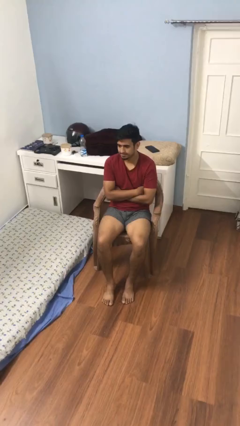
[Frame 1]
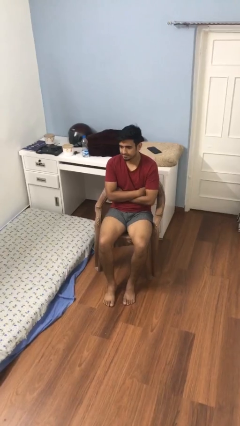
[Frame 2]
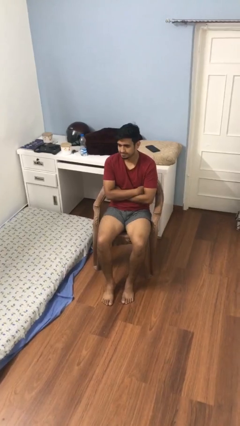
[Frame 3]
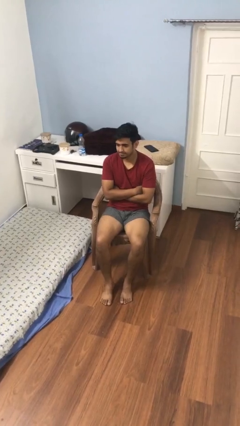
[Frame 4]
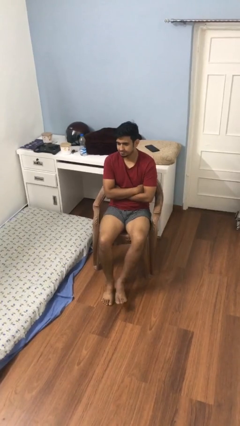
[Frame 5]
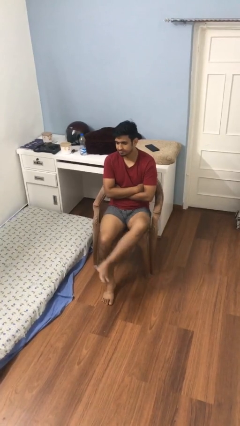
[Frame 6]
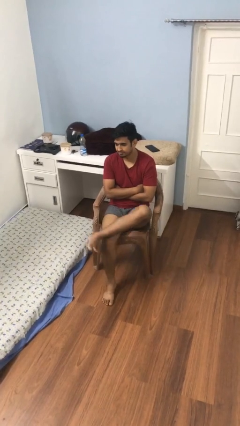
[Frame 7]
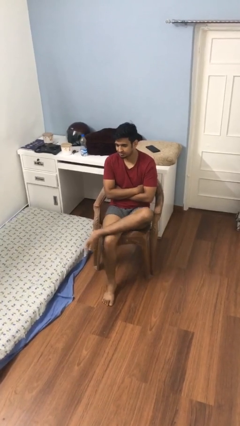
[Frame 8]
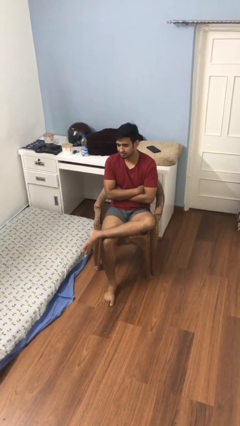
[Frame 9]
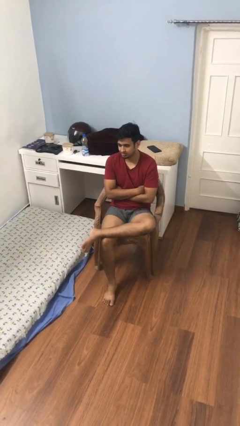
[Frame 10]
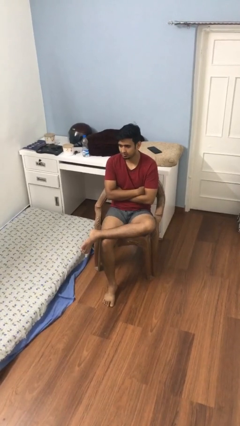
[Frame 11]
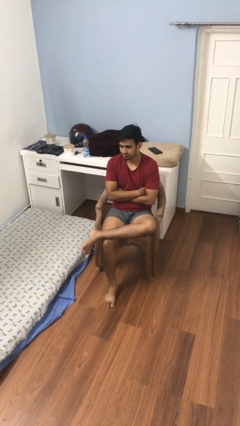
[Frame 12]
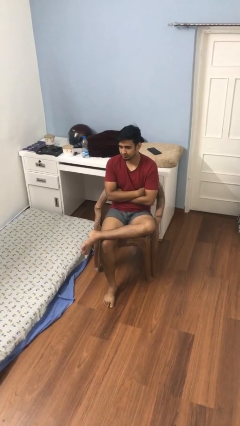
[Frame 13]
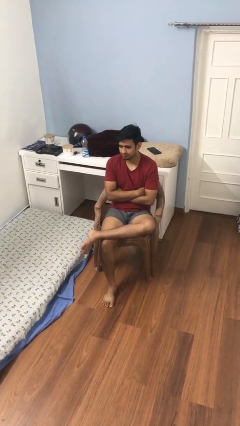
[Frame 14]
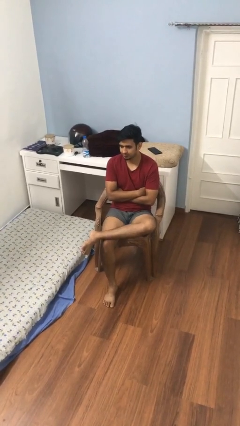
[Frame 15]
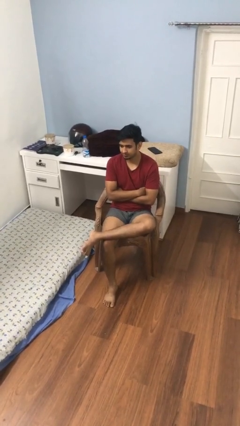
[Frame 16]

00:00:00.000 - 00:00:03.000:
person crosses legs

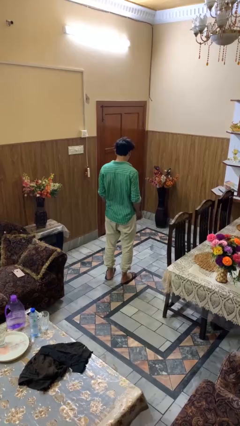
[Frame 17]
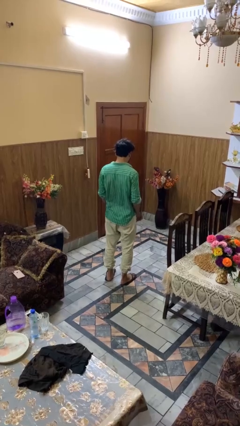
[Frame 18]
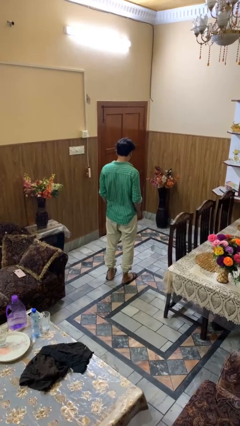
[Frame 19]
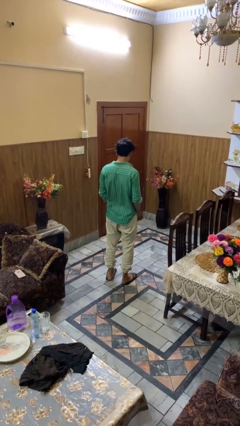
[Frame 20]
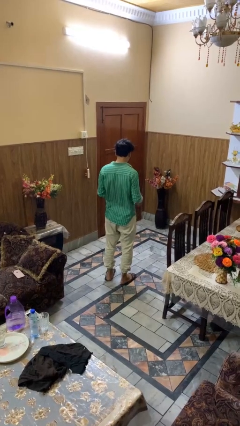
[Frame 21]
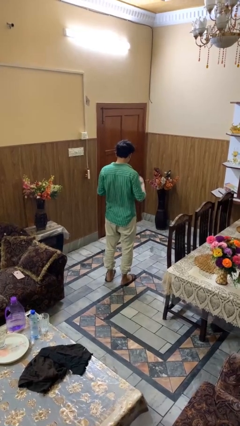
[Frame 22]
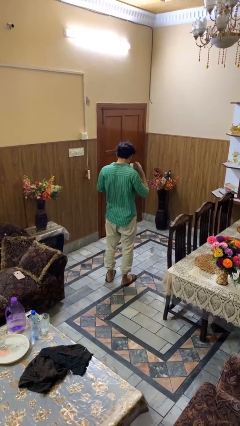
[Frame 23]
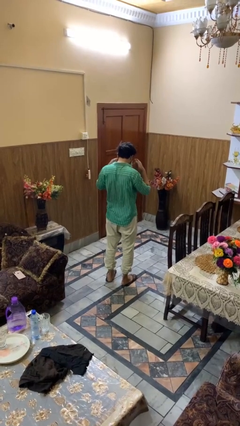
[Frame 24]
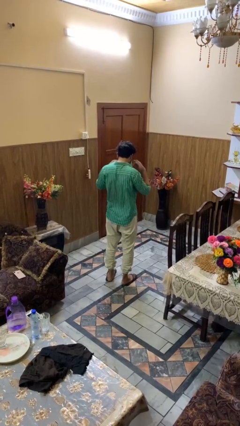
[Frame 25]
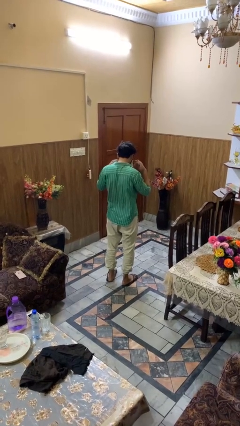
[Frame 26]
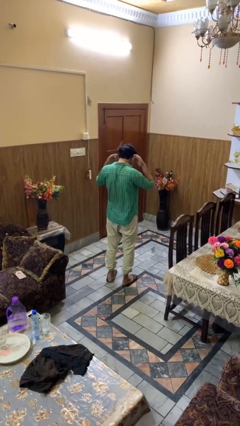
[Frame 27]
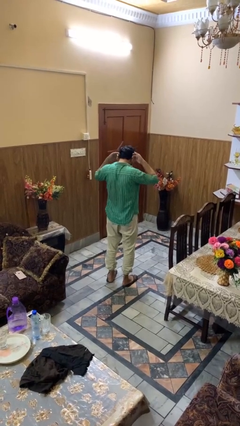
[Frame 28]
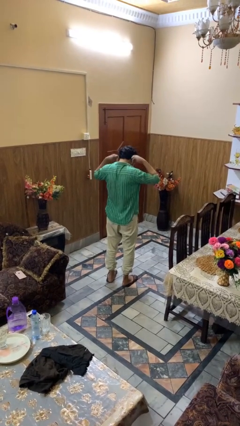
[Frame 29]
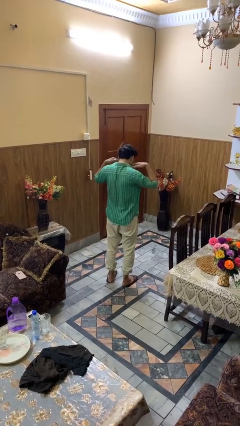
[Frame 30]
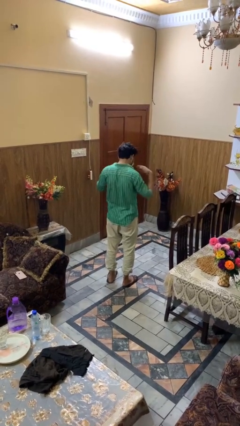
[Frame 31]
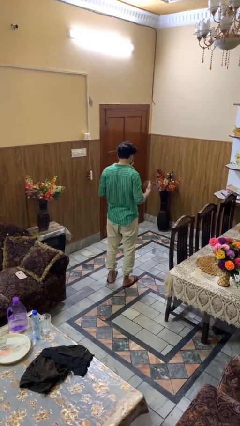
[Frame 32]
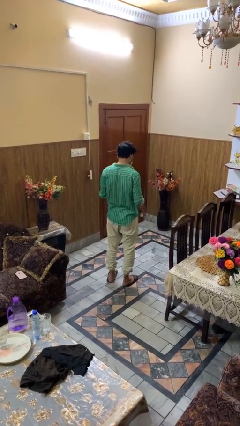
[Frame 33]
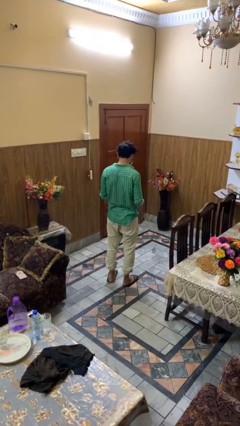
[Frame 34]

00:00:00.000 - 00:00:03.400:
person puts on facemask

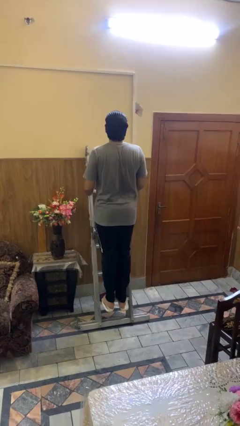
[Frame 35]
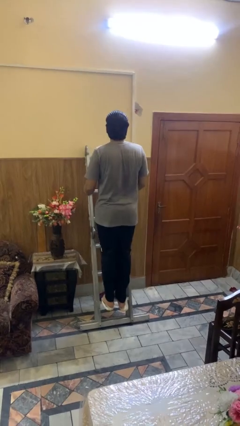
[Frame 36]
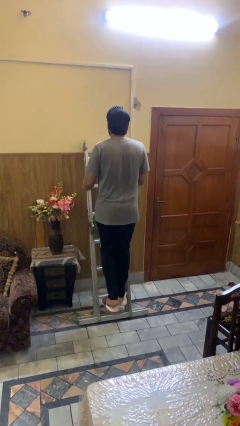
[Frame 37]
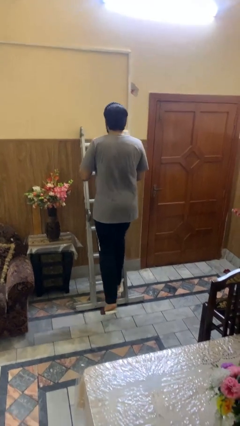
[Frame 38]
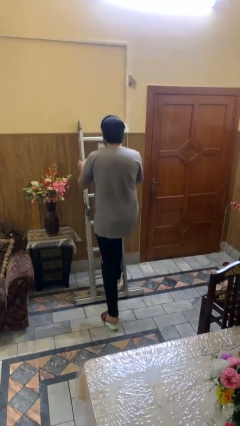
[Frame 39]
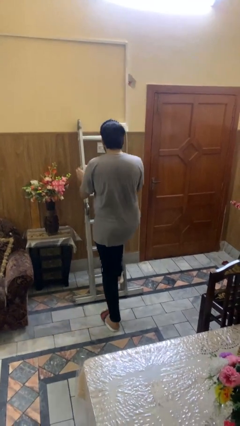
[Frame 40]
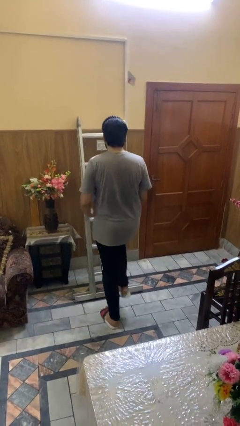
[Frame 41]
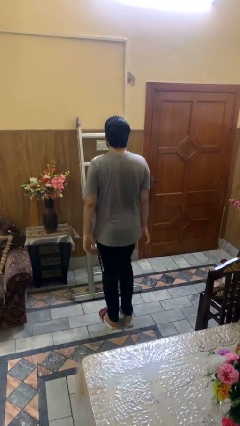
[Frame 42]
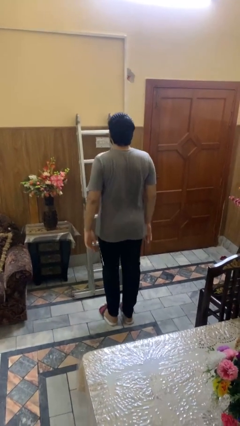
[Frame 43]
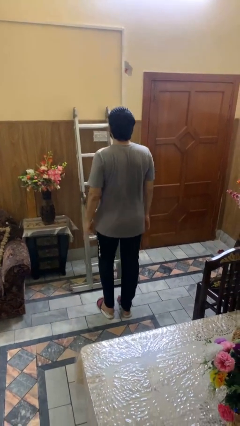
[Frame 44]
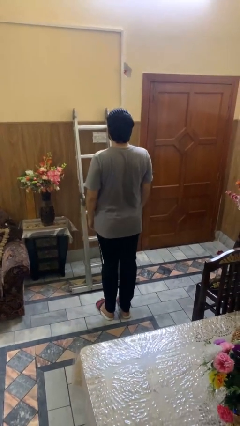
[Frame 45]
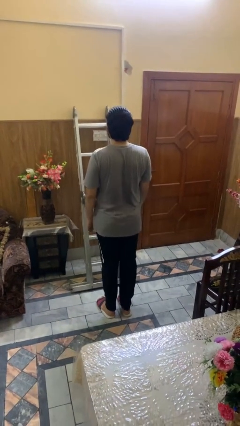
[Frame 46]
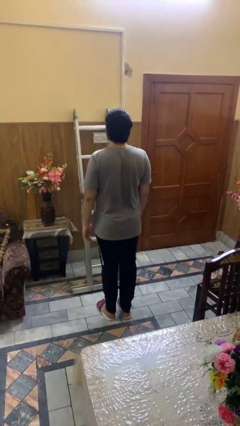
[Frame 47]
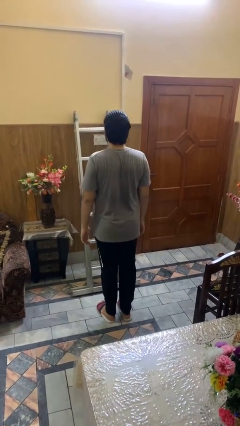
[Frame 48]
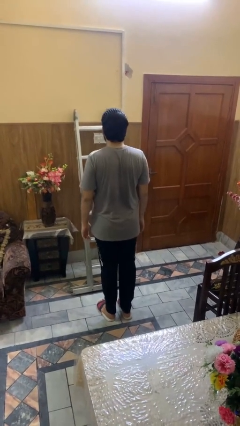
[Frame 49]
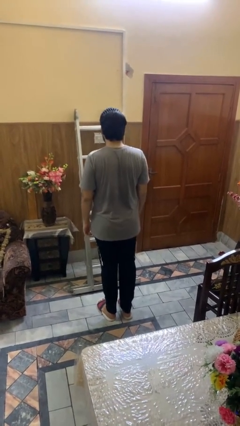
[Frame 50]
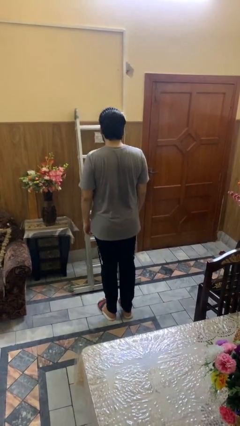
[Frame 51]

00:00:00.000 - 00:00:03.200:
person climbs down ladder

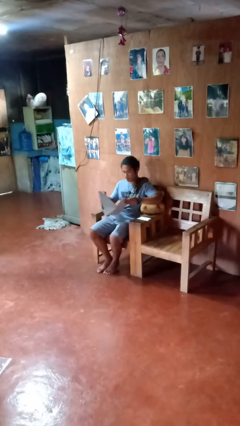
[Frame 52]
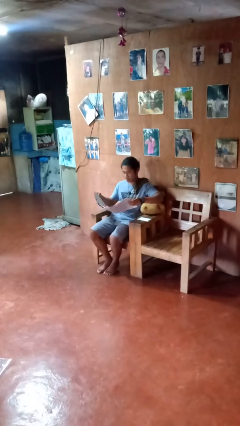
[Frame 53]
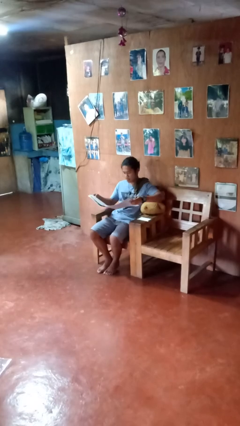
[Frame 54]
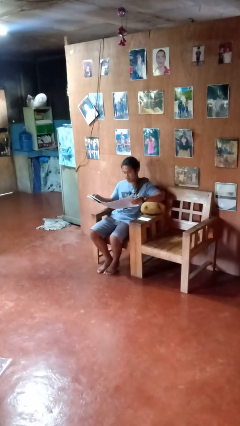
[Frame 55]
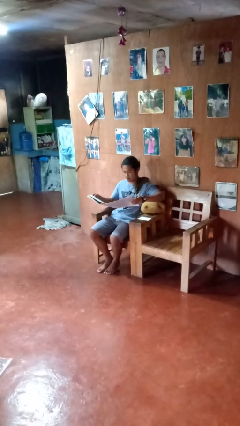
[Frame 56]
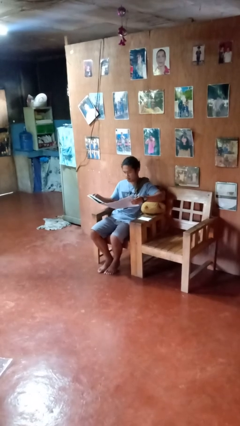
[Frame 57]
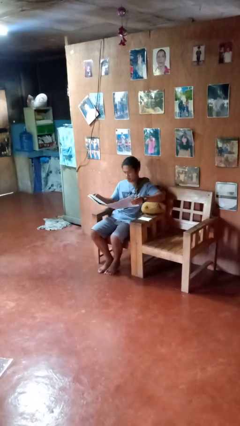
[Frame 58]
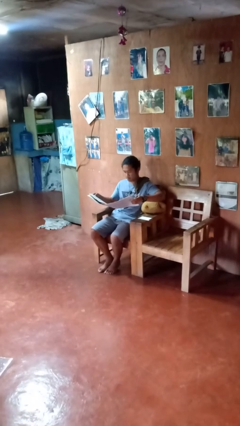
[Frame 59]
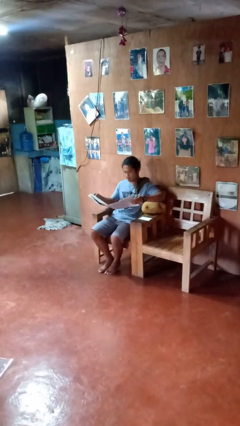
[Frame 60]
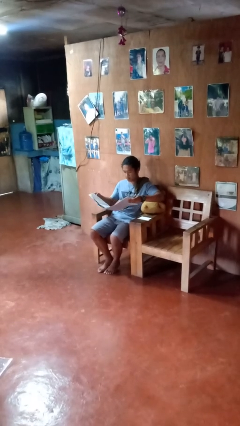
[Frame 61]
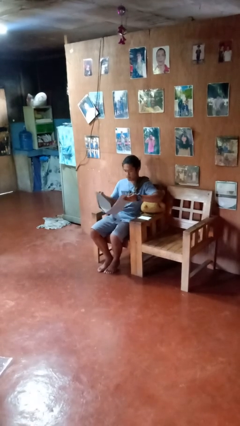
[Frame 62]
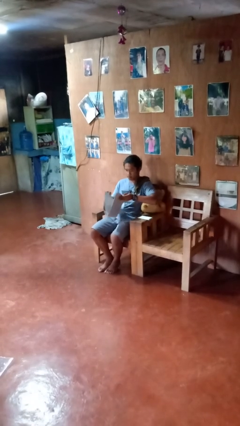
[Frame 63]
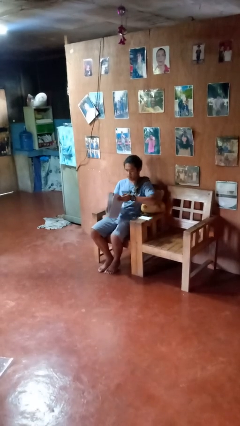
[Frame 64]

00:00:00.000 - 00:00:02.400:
person reads newspaper

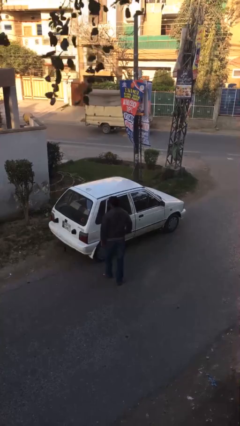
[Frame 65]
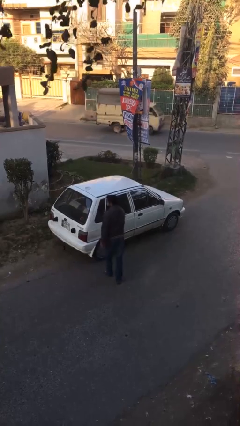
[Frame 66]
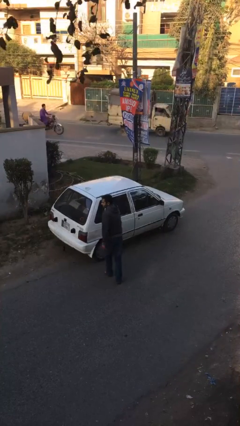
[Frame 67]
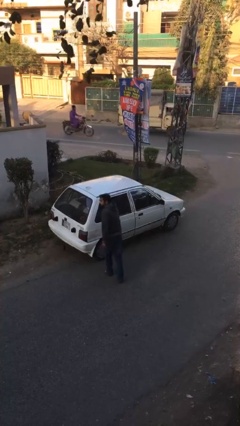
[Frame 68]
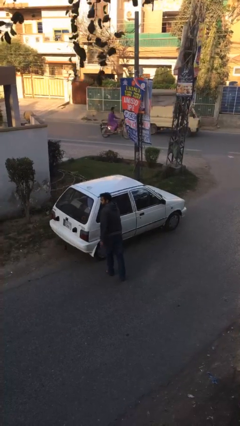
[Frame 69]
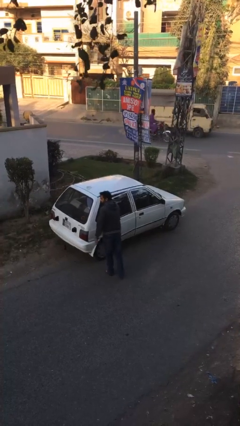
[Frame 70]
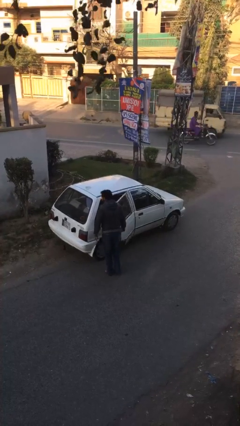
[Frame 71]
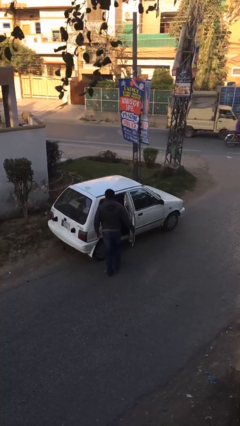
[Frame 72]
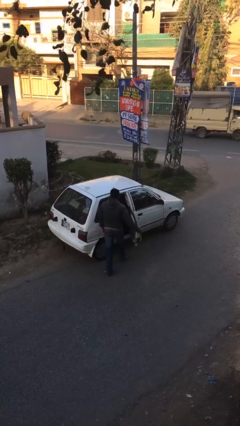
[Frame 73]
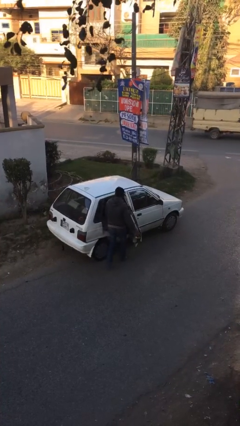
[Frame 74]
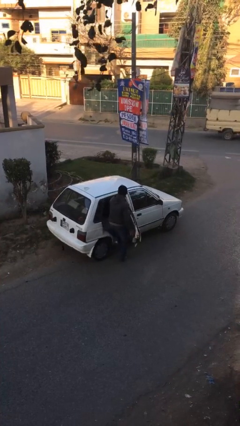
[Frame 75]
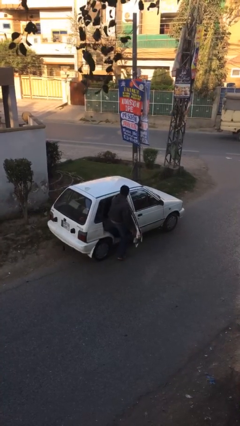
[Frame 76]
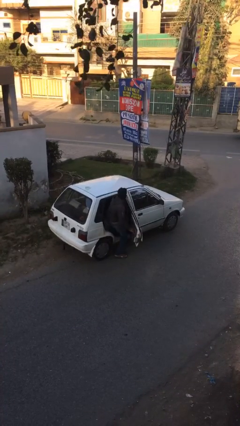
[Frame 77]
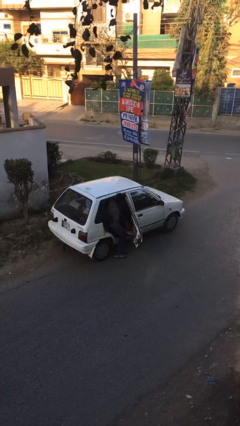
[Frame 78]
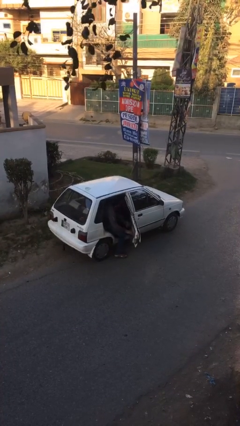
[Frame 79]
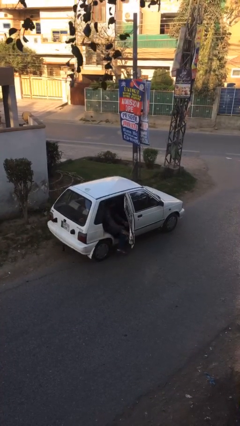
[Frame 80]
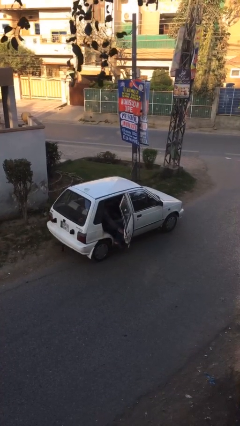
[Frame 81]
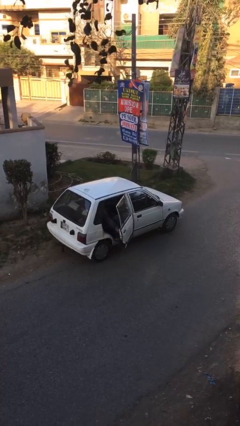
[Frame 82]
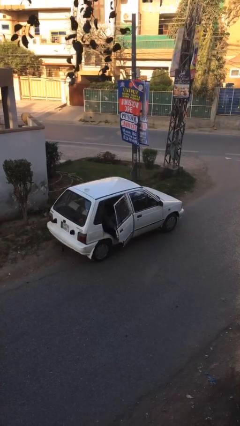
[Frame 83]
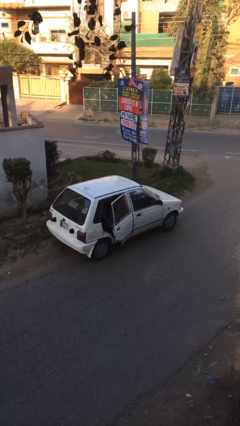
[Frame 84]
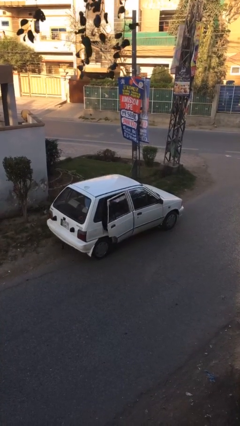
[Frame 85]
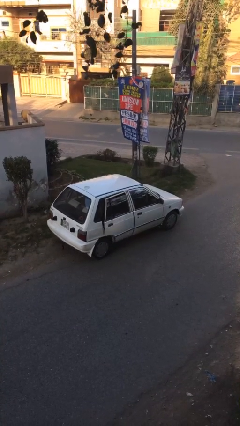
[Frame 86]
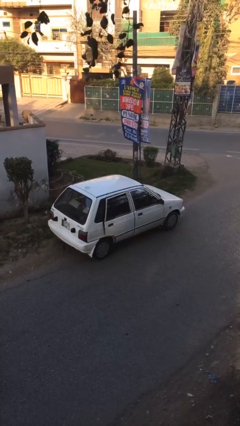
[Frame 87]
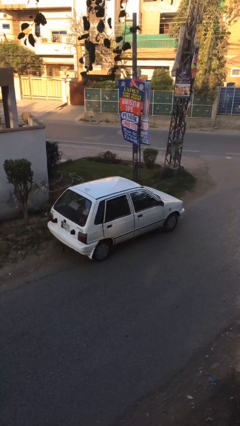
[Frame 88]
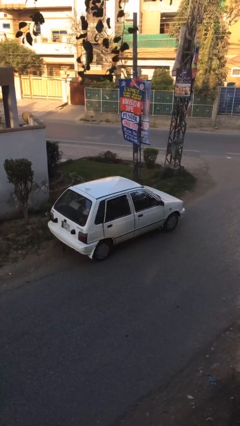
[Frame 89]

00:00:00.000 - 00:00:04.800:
car picks up person

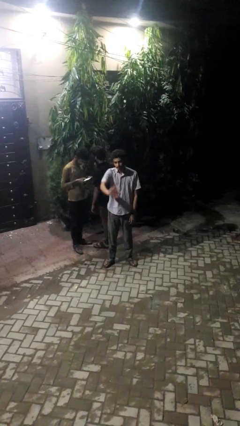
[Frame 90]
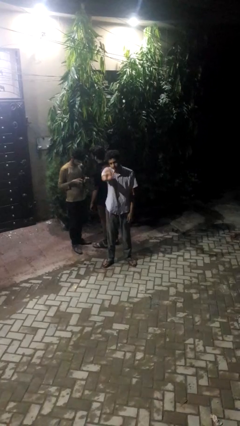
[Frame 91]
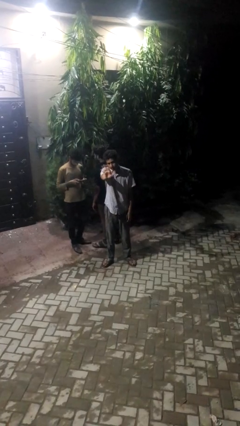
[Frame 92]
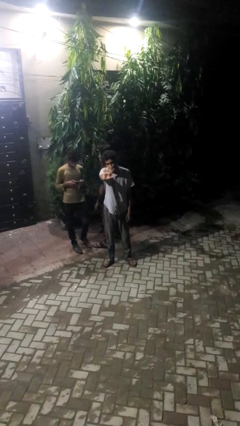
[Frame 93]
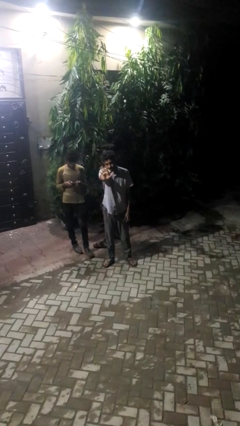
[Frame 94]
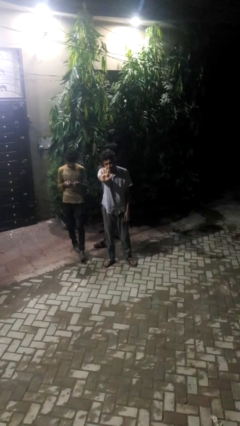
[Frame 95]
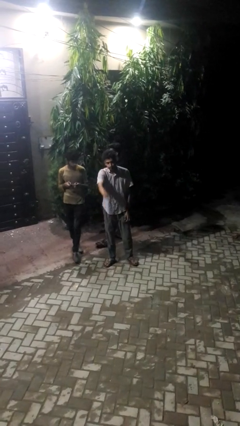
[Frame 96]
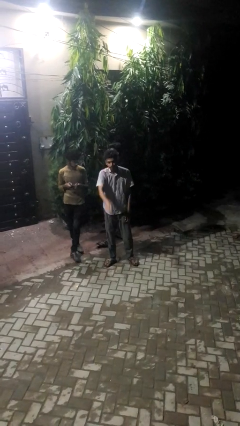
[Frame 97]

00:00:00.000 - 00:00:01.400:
person waves at person
